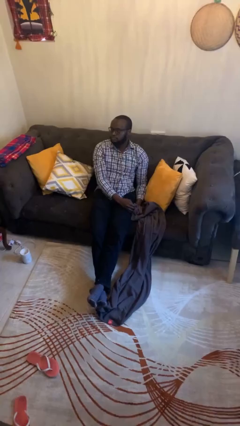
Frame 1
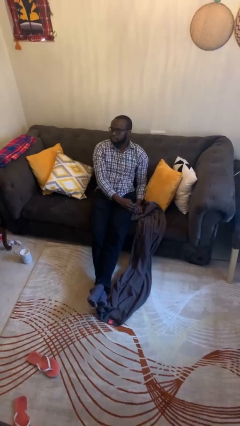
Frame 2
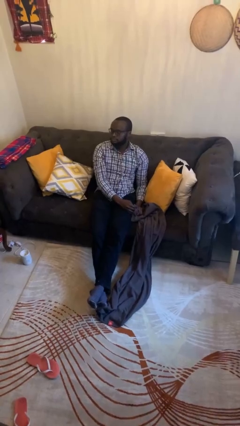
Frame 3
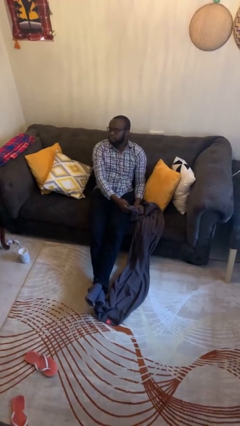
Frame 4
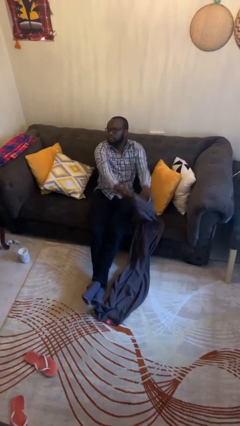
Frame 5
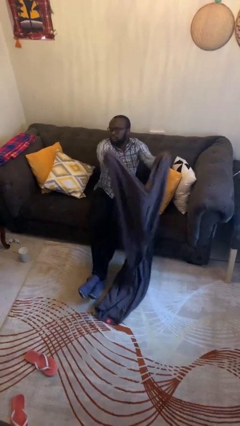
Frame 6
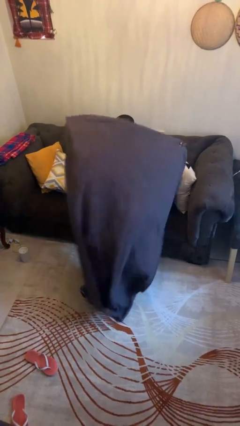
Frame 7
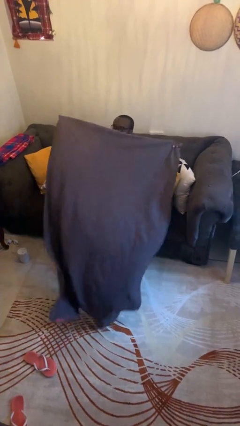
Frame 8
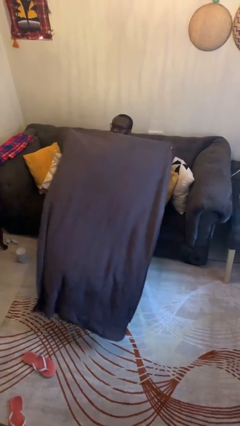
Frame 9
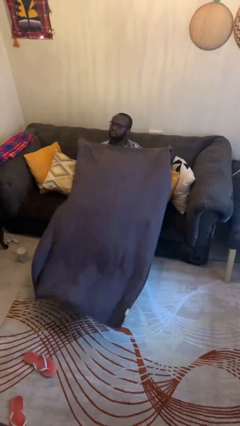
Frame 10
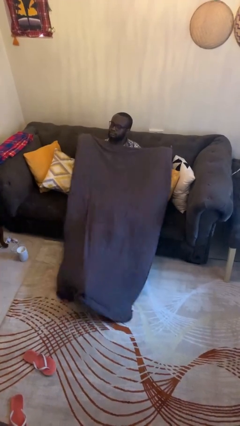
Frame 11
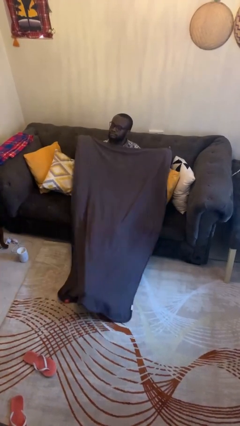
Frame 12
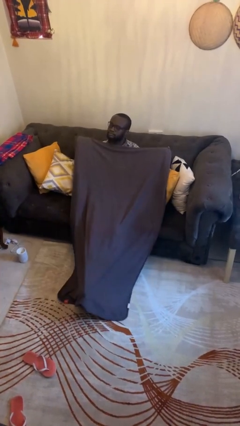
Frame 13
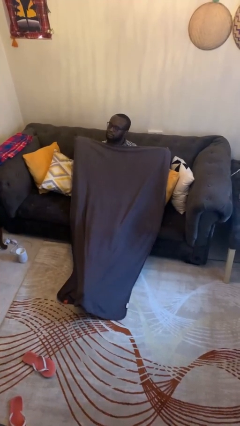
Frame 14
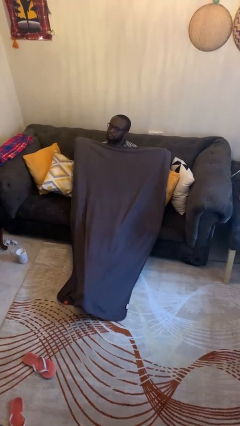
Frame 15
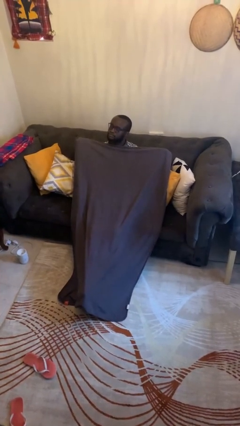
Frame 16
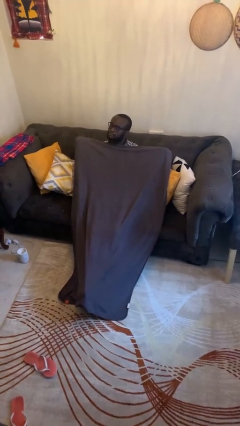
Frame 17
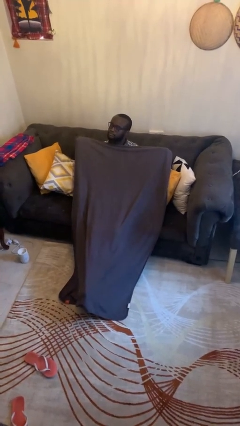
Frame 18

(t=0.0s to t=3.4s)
person covers with blanket

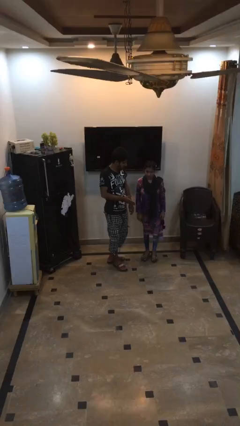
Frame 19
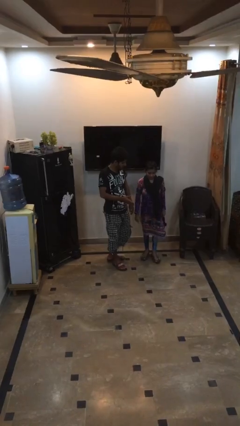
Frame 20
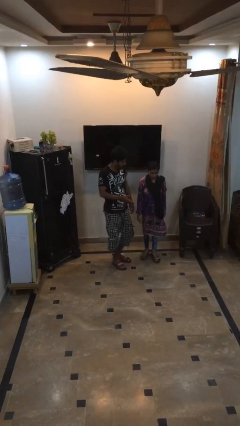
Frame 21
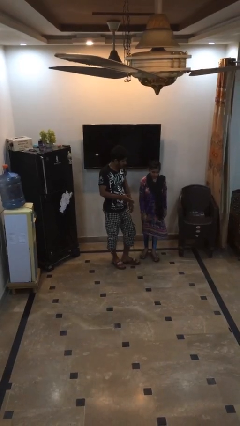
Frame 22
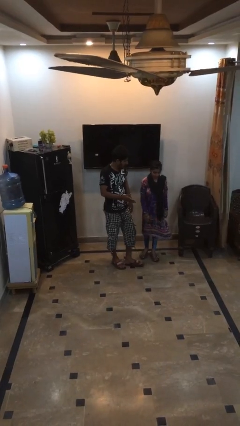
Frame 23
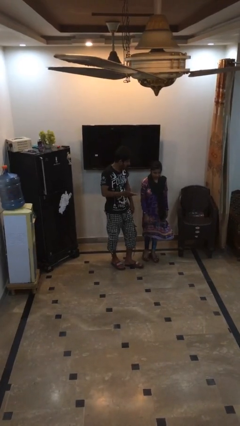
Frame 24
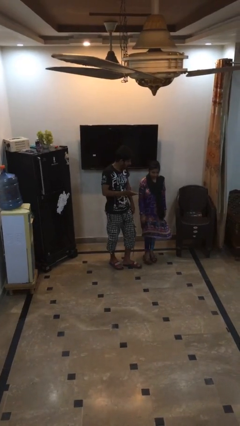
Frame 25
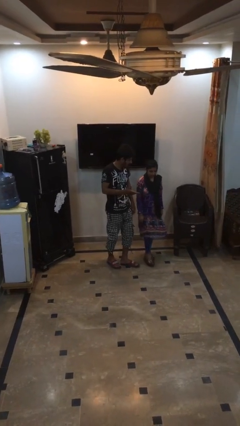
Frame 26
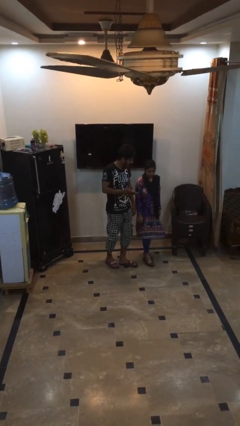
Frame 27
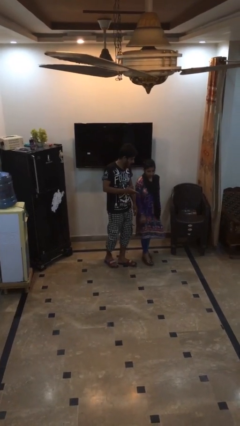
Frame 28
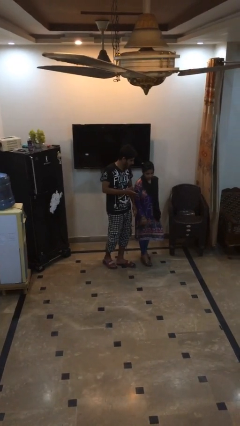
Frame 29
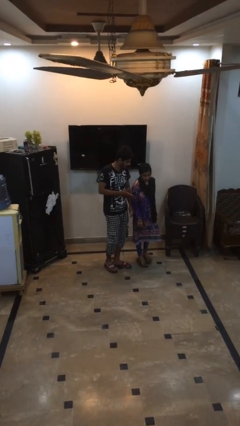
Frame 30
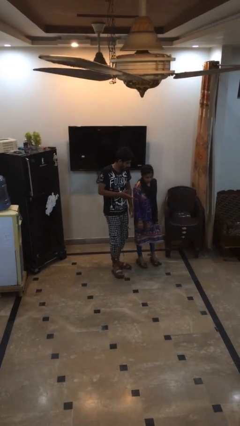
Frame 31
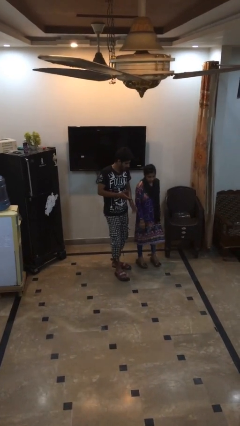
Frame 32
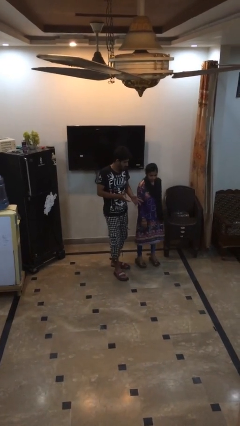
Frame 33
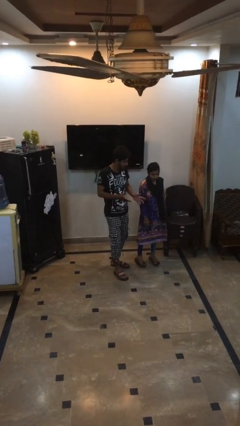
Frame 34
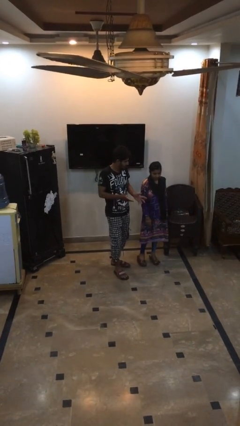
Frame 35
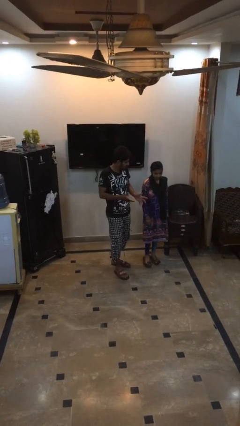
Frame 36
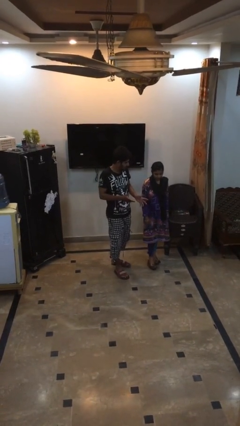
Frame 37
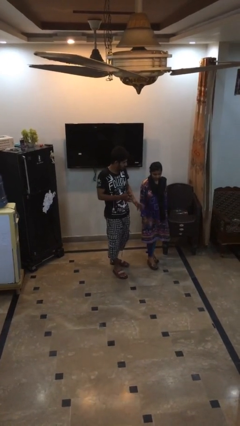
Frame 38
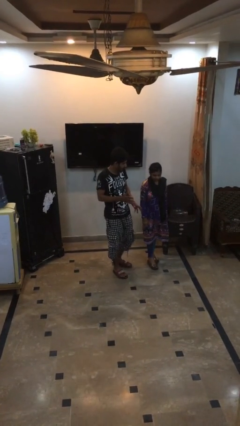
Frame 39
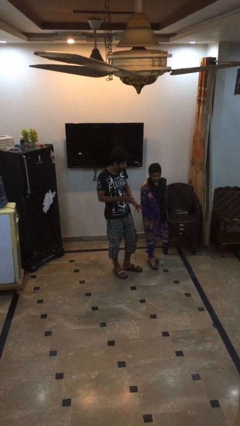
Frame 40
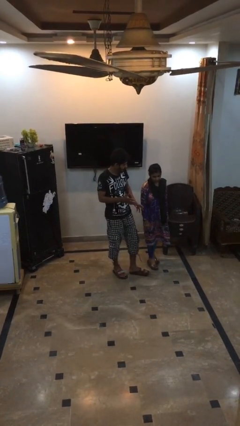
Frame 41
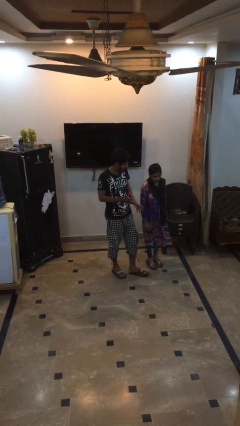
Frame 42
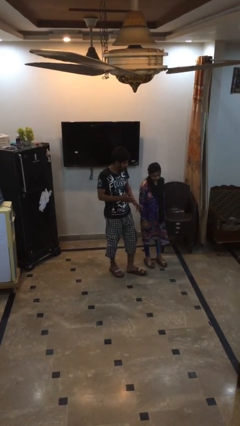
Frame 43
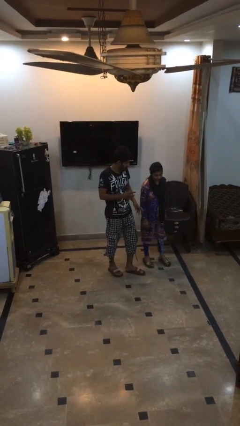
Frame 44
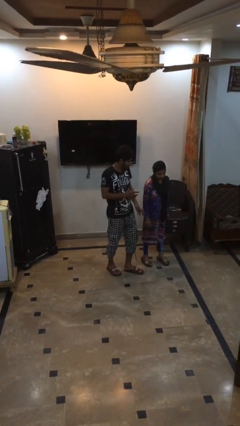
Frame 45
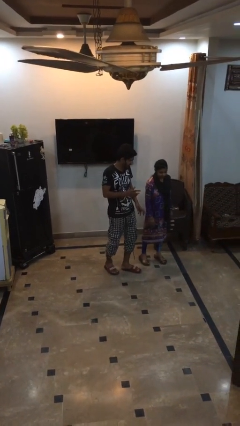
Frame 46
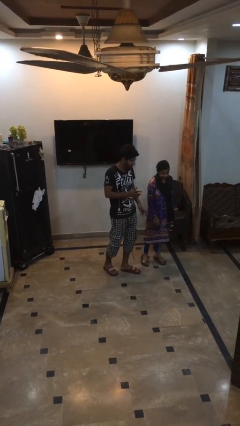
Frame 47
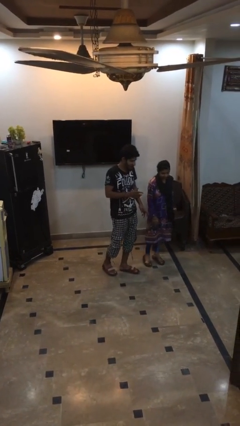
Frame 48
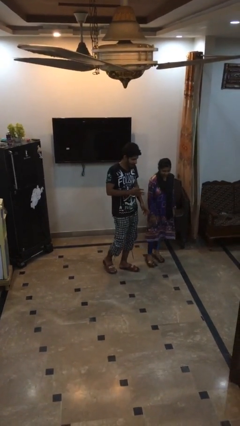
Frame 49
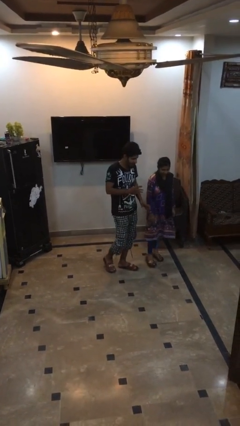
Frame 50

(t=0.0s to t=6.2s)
person talks to person

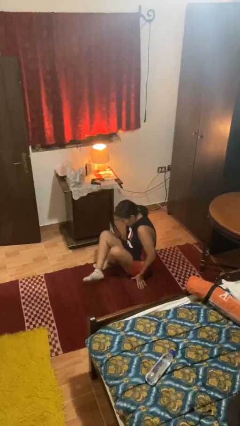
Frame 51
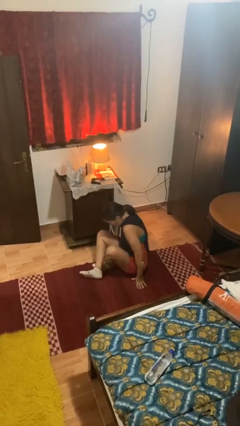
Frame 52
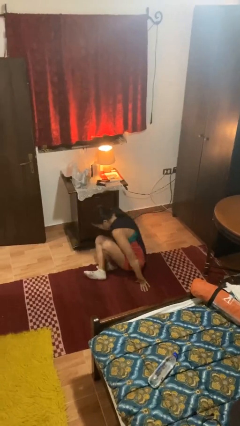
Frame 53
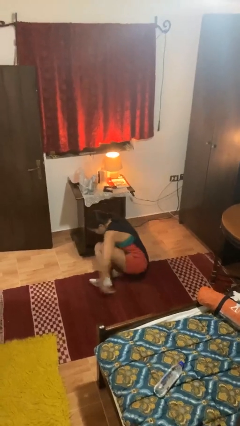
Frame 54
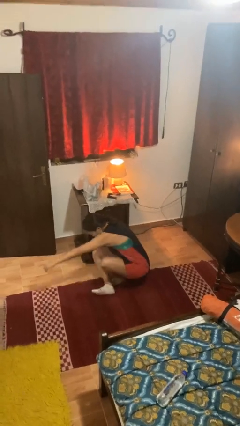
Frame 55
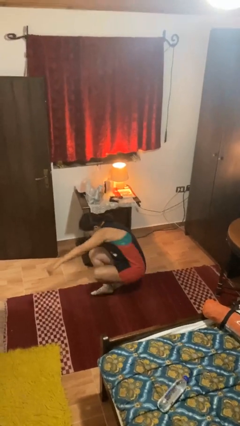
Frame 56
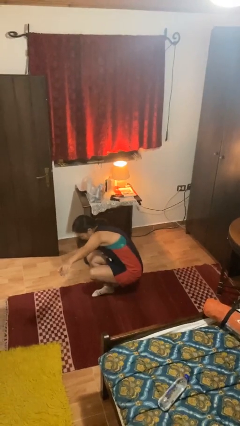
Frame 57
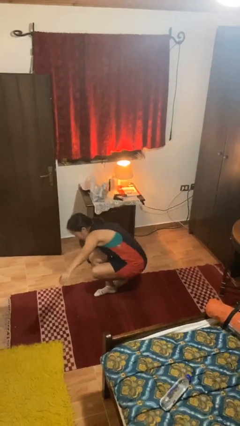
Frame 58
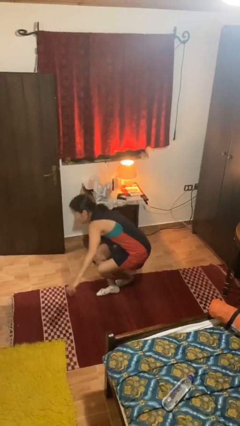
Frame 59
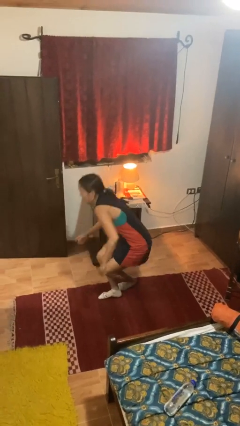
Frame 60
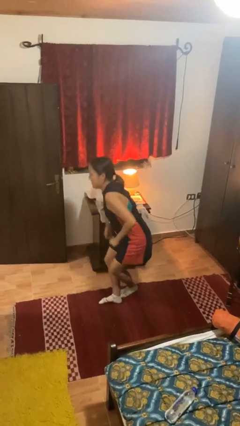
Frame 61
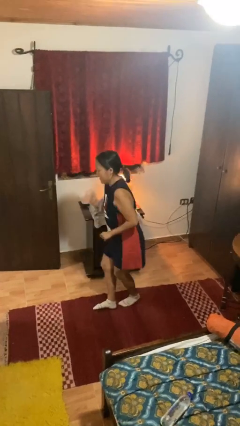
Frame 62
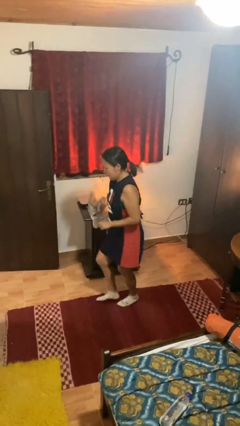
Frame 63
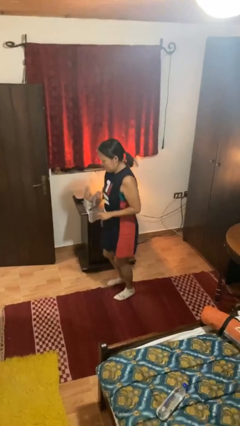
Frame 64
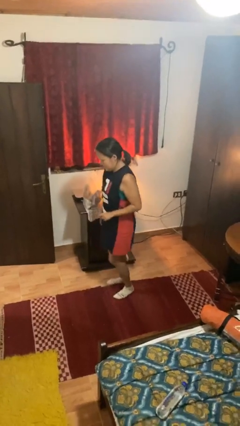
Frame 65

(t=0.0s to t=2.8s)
person stands up from floor

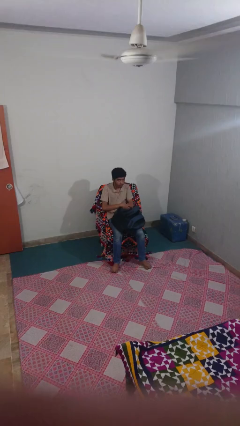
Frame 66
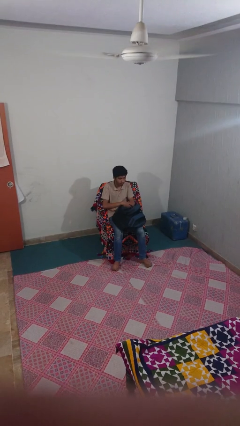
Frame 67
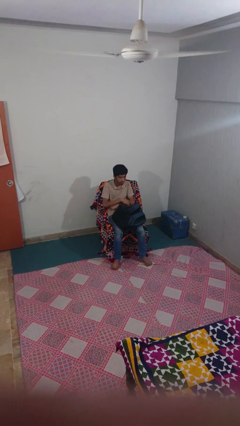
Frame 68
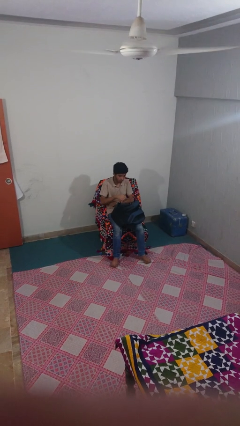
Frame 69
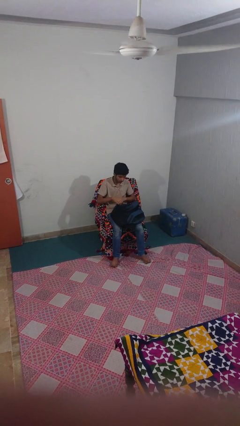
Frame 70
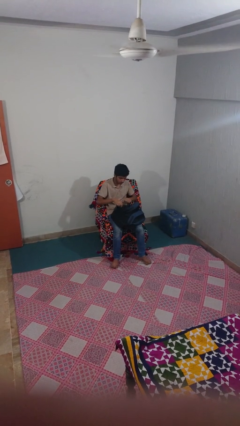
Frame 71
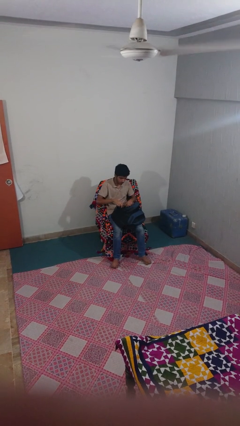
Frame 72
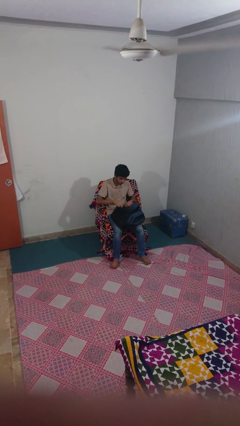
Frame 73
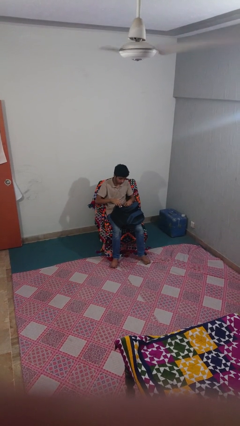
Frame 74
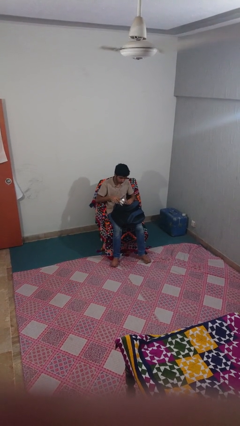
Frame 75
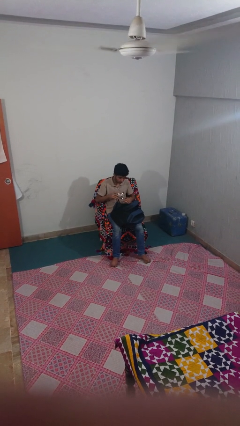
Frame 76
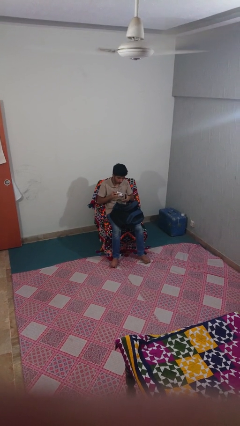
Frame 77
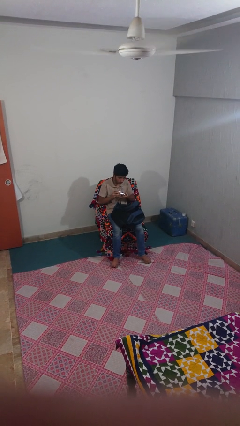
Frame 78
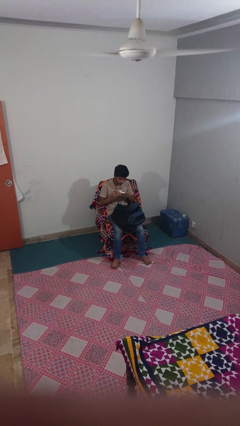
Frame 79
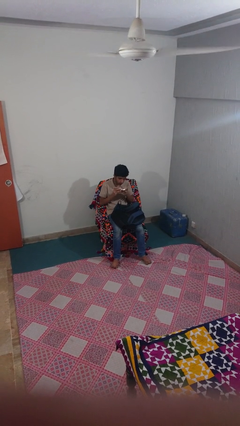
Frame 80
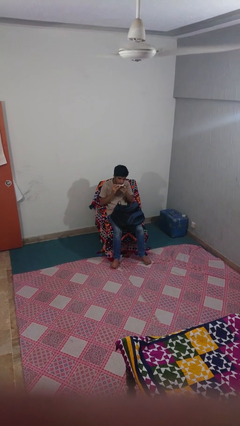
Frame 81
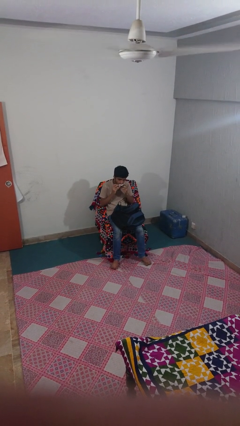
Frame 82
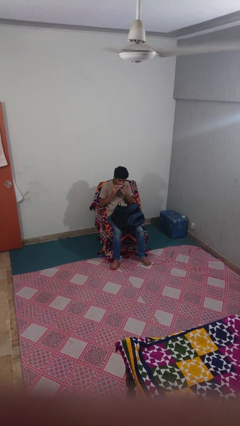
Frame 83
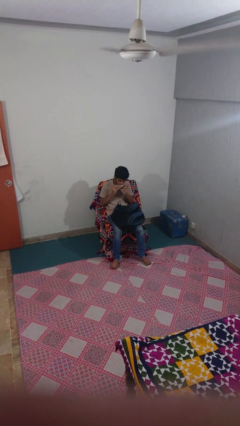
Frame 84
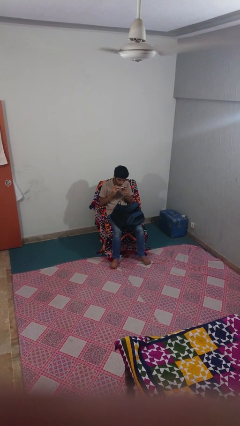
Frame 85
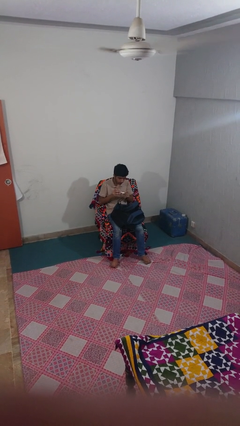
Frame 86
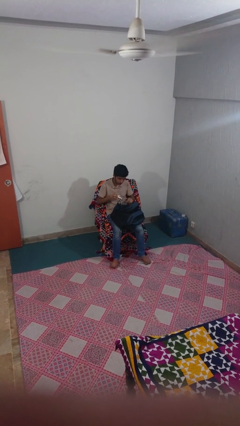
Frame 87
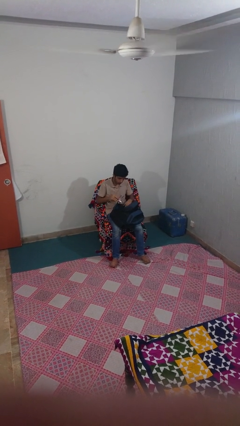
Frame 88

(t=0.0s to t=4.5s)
person eats snack from bag

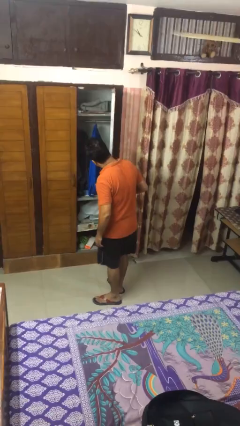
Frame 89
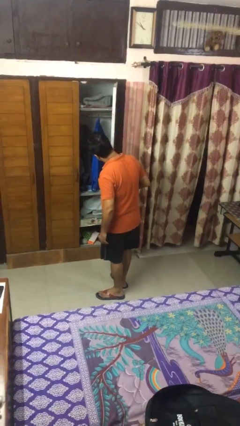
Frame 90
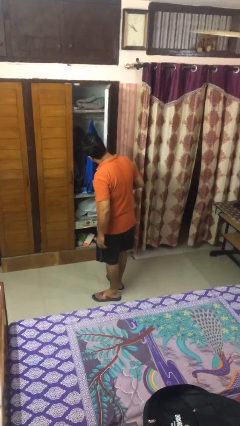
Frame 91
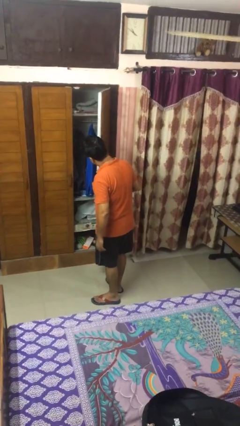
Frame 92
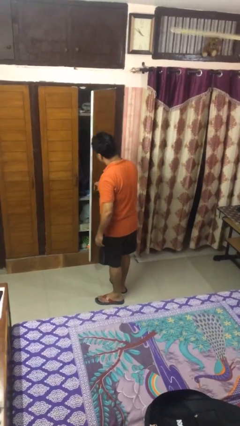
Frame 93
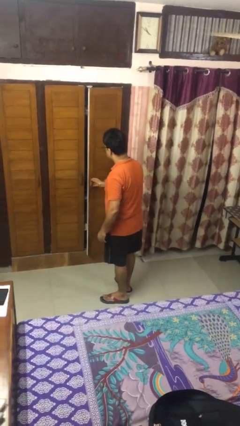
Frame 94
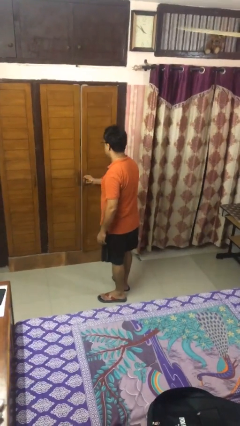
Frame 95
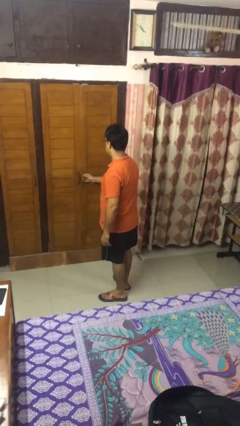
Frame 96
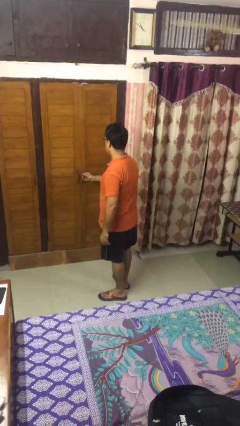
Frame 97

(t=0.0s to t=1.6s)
person closes closet door
